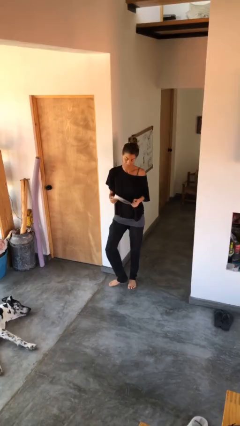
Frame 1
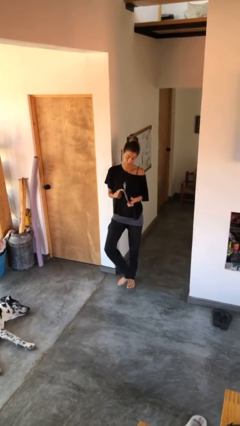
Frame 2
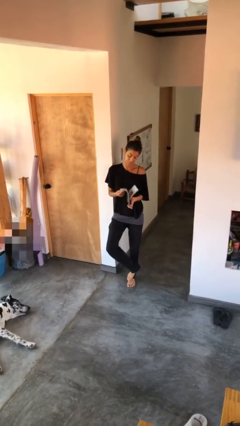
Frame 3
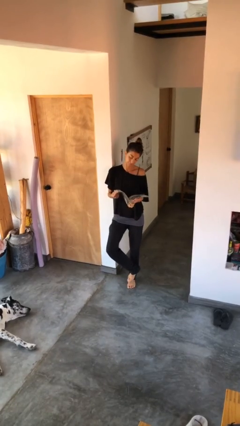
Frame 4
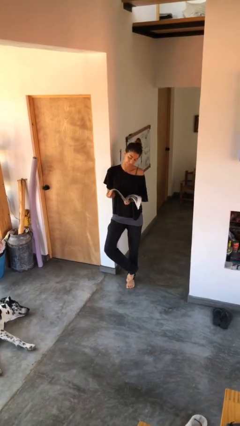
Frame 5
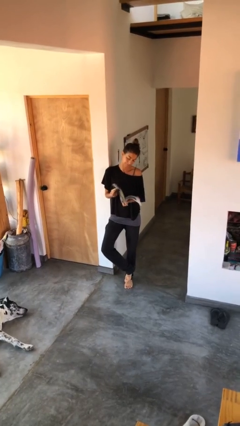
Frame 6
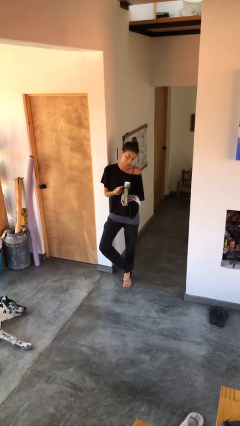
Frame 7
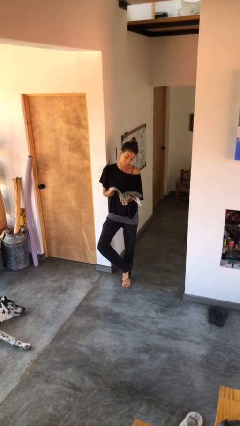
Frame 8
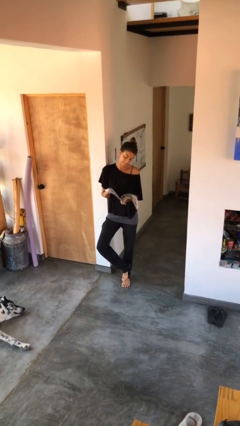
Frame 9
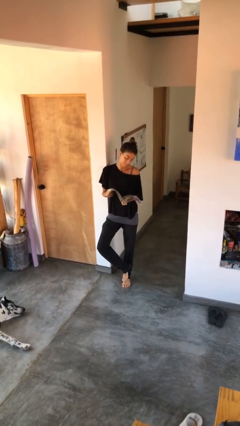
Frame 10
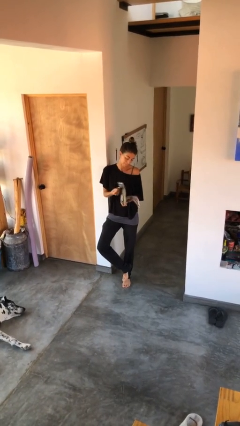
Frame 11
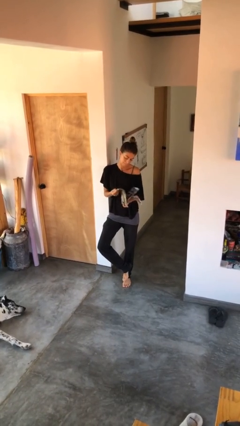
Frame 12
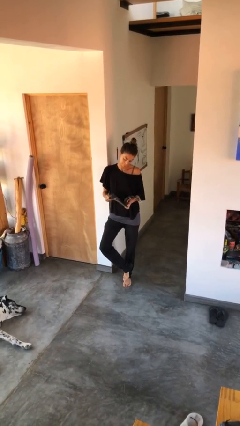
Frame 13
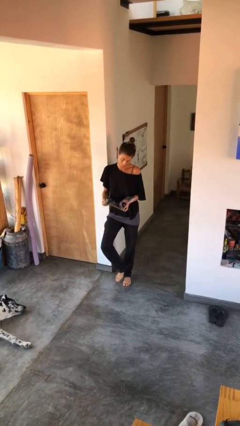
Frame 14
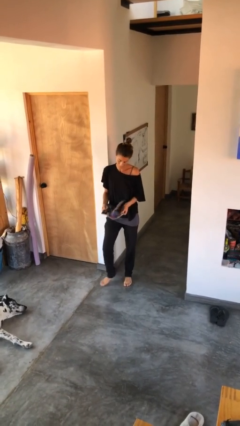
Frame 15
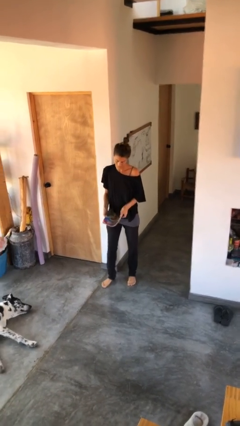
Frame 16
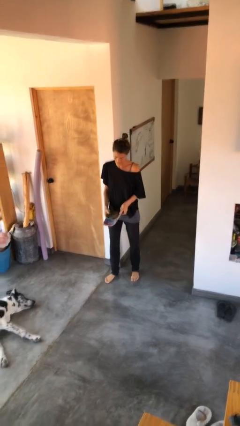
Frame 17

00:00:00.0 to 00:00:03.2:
person reads magazine

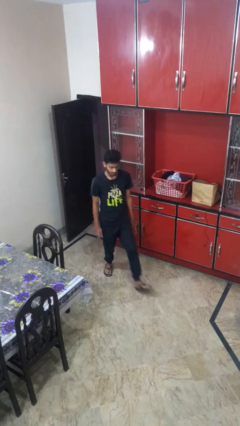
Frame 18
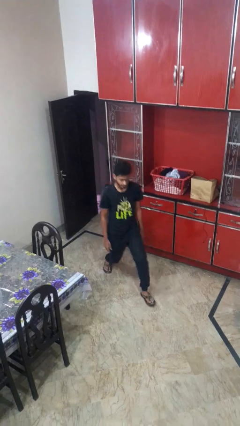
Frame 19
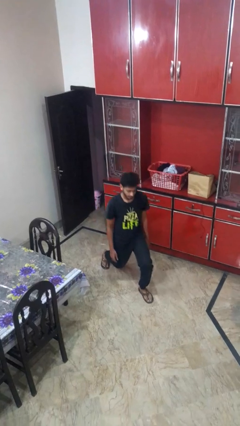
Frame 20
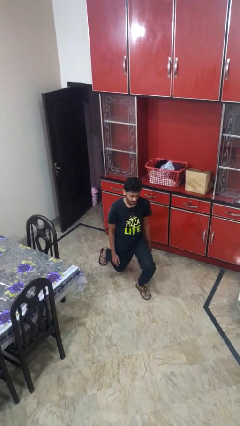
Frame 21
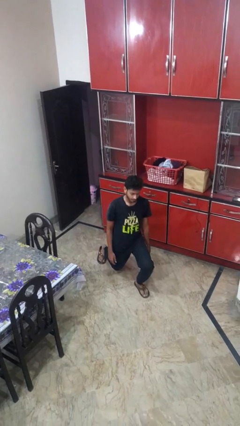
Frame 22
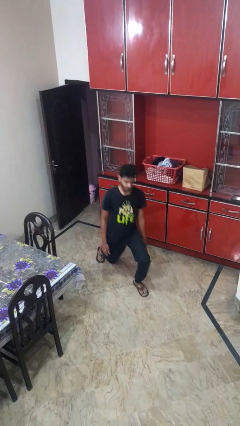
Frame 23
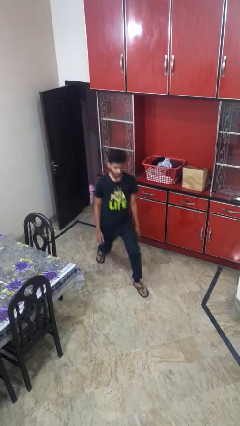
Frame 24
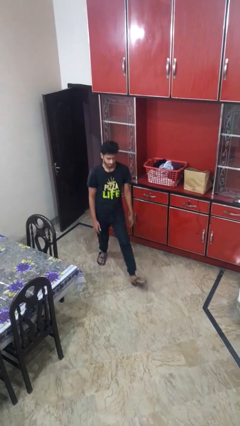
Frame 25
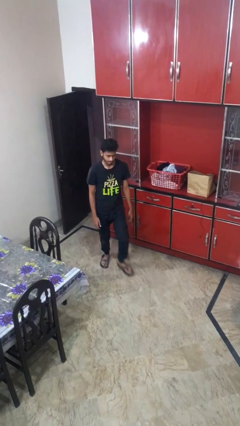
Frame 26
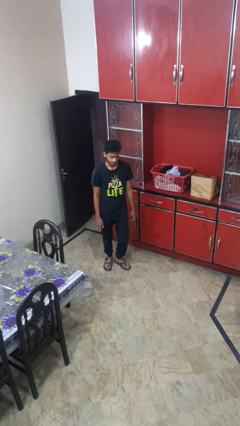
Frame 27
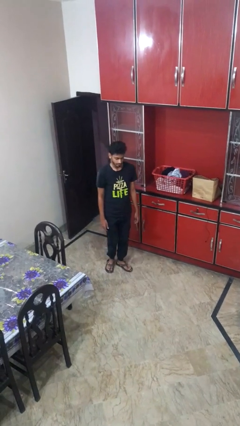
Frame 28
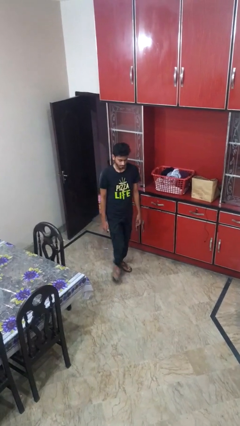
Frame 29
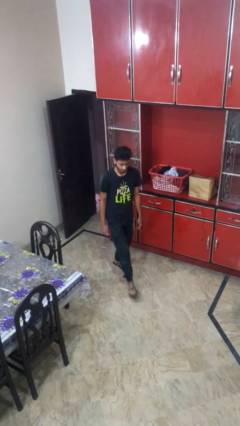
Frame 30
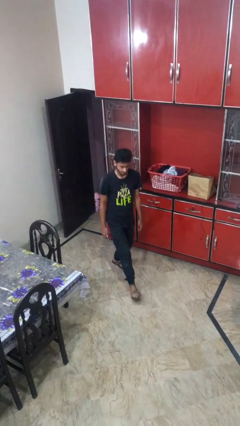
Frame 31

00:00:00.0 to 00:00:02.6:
person exercises with lunges

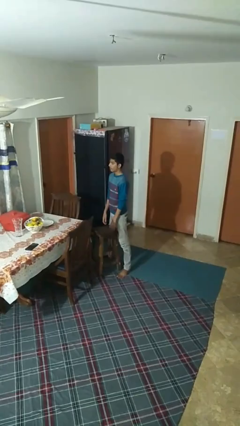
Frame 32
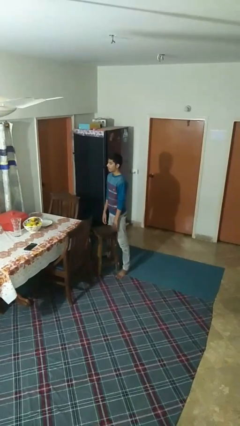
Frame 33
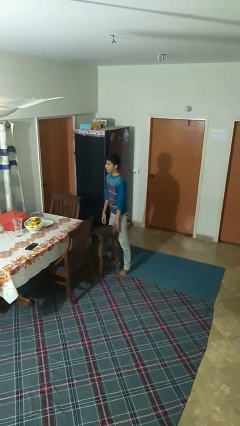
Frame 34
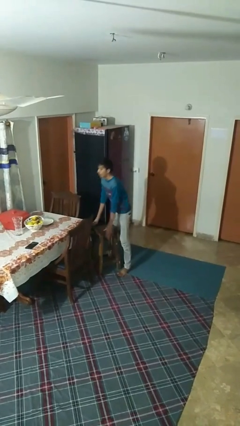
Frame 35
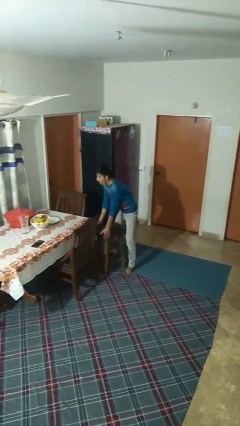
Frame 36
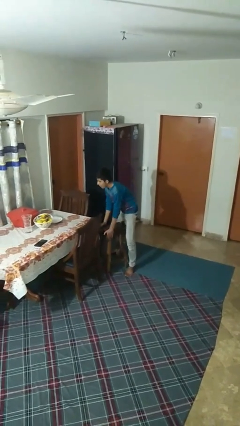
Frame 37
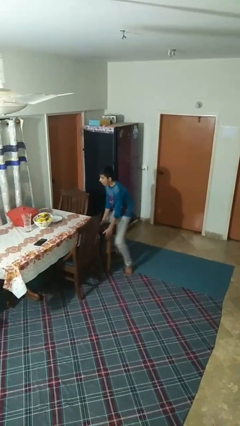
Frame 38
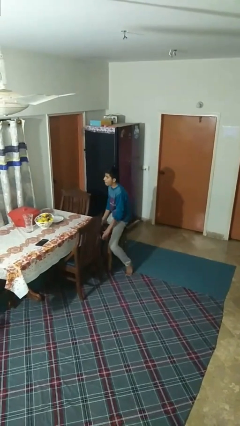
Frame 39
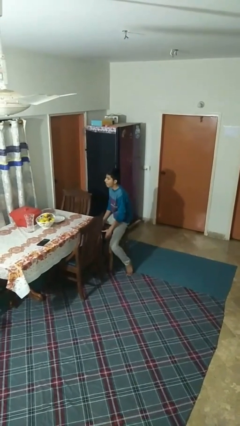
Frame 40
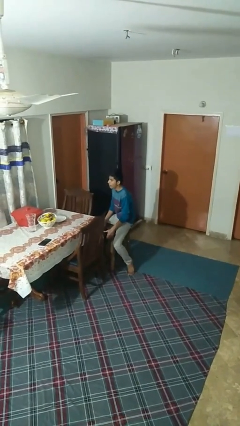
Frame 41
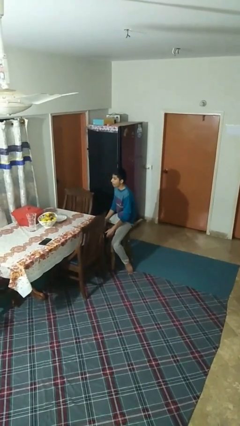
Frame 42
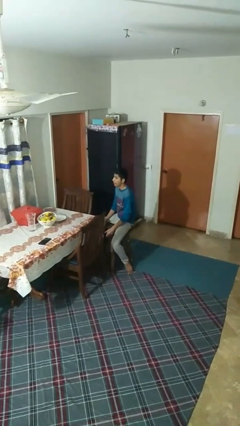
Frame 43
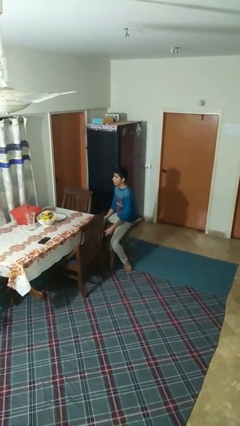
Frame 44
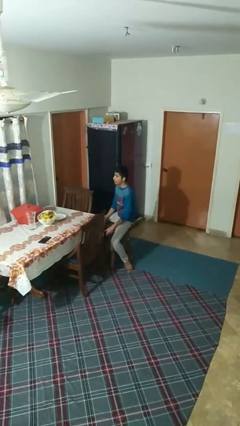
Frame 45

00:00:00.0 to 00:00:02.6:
person sits down

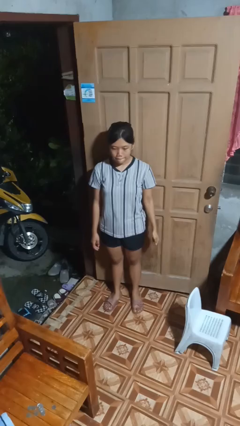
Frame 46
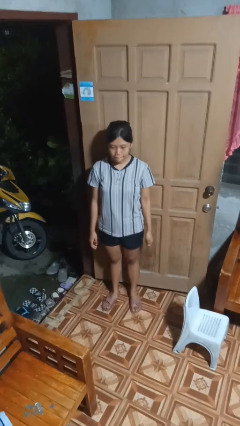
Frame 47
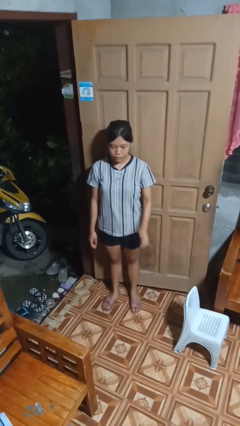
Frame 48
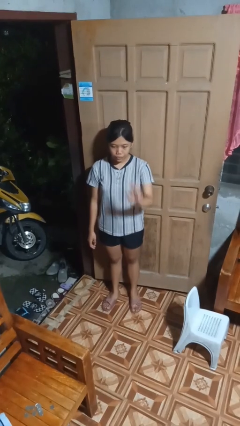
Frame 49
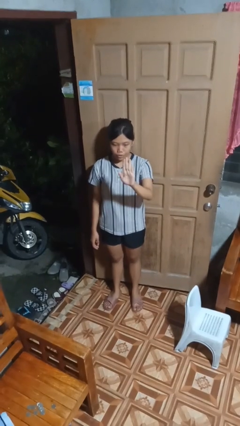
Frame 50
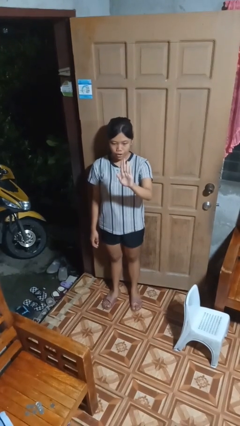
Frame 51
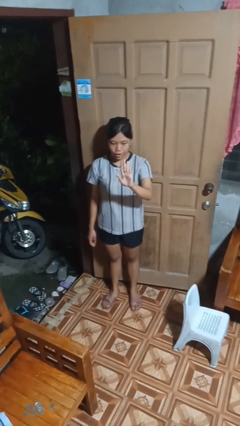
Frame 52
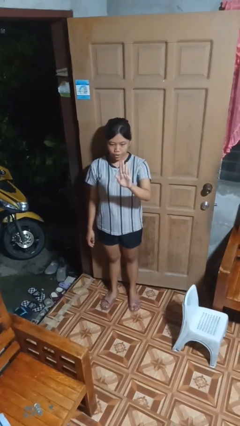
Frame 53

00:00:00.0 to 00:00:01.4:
person gestures number five

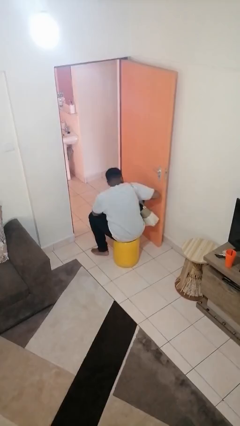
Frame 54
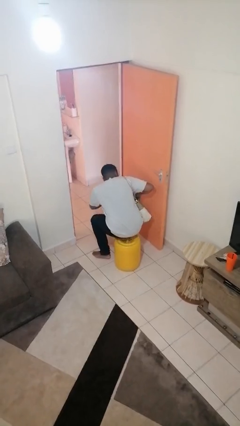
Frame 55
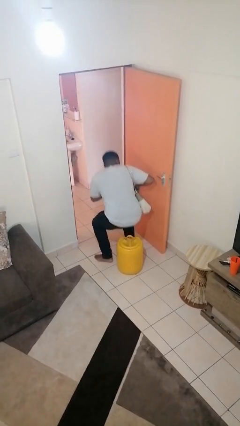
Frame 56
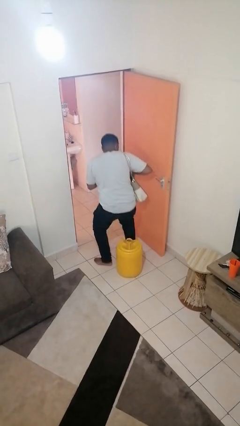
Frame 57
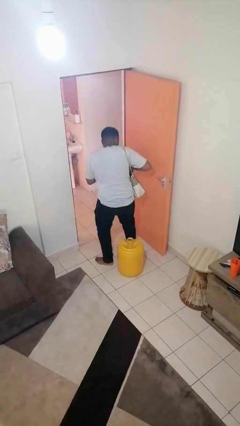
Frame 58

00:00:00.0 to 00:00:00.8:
person searches in purse

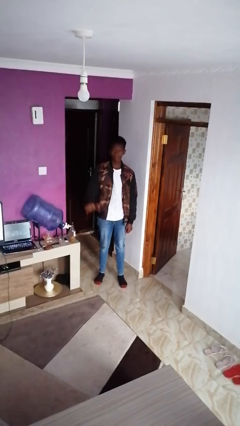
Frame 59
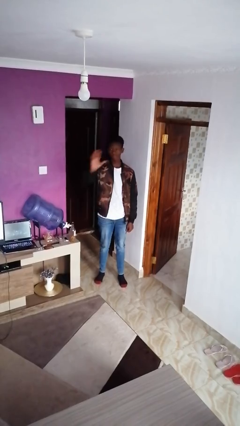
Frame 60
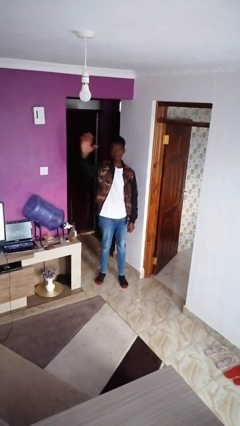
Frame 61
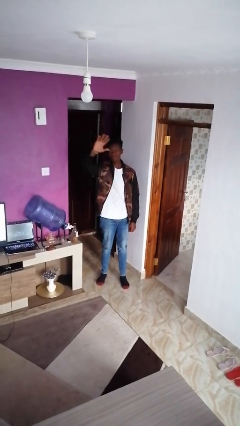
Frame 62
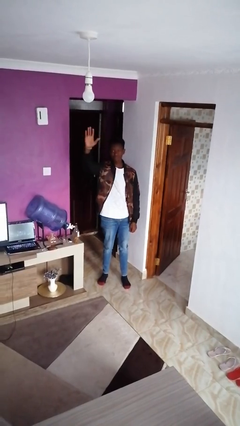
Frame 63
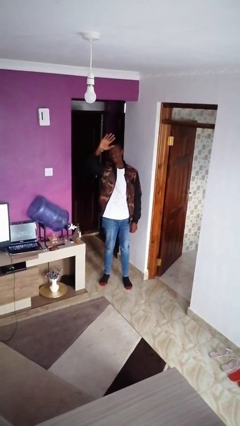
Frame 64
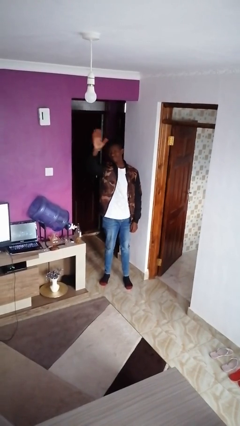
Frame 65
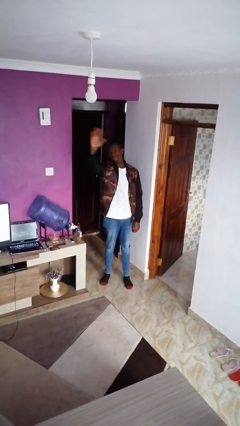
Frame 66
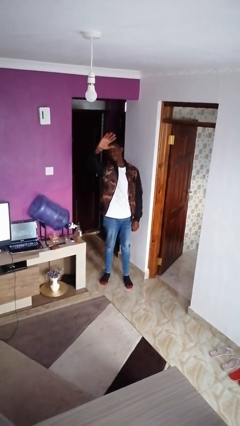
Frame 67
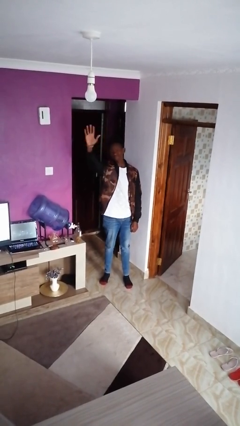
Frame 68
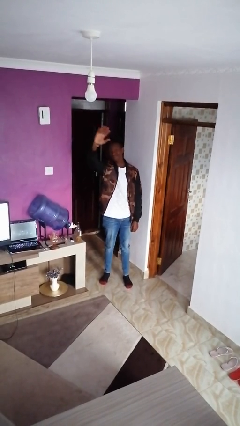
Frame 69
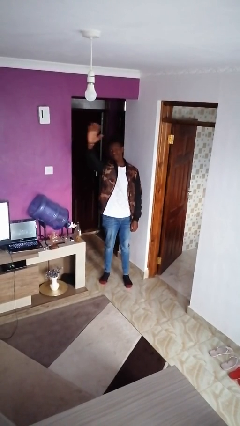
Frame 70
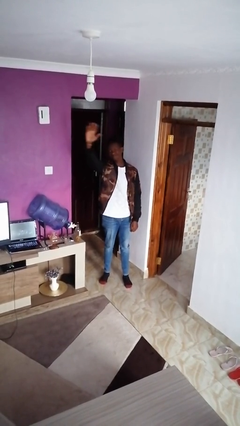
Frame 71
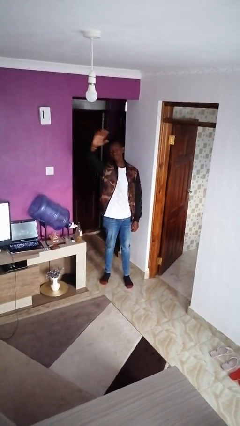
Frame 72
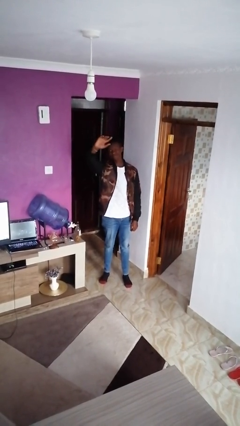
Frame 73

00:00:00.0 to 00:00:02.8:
person waves at person

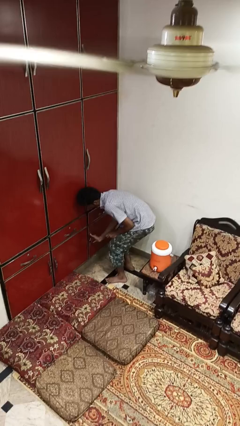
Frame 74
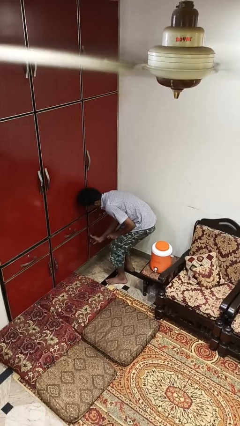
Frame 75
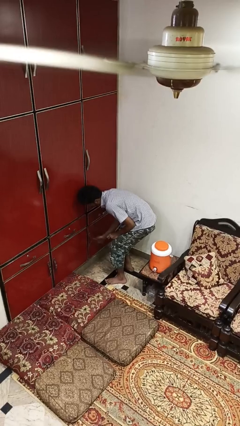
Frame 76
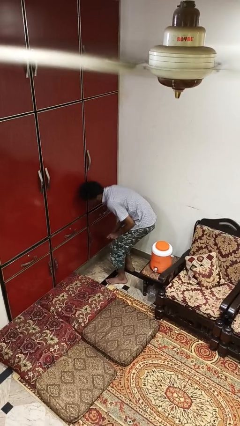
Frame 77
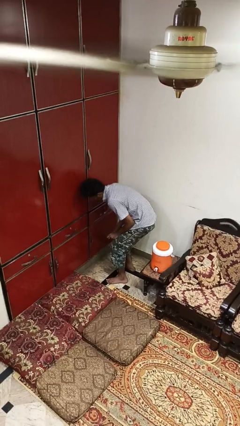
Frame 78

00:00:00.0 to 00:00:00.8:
person closes cabinet

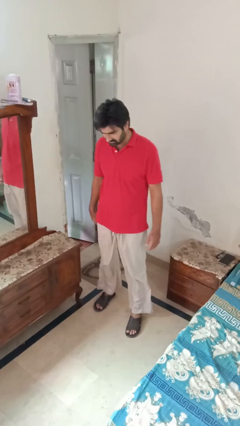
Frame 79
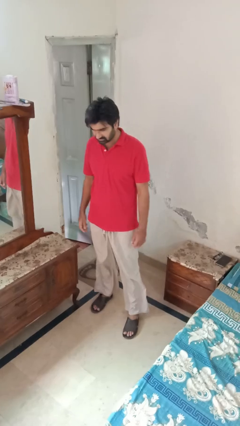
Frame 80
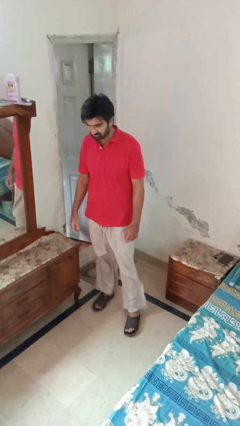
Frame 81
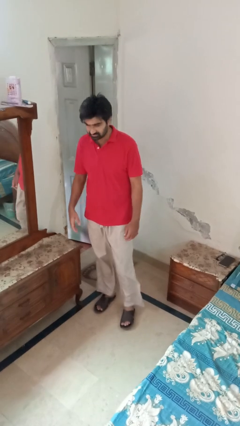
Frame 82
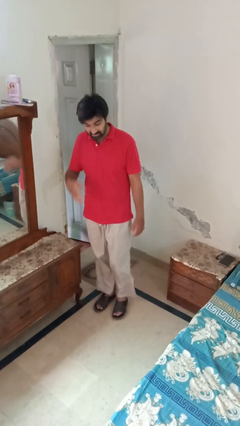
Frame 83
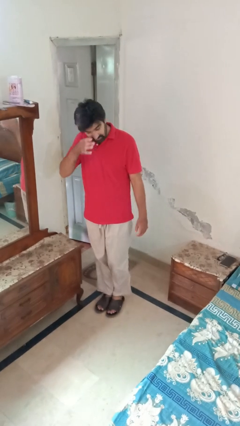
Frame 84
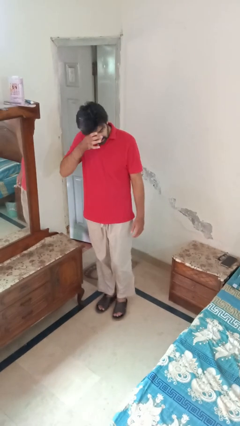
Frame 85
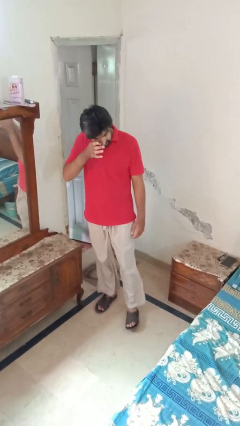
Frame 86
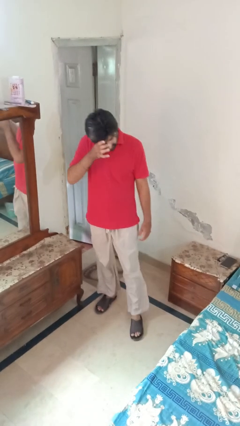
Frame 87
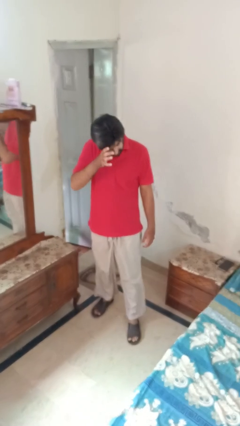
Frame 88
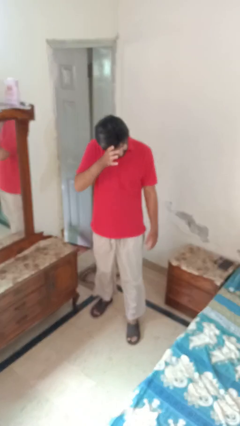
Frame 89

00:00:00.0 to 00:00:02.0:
person rubs eyes
